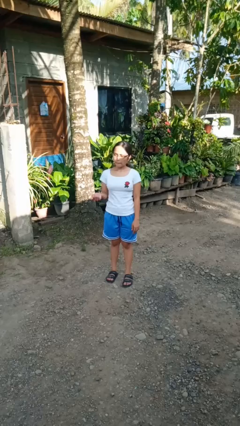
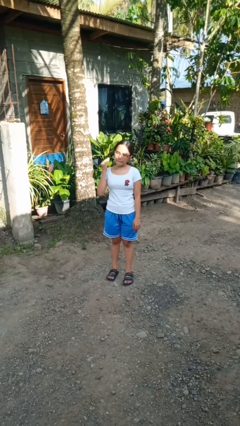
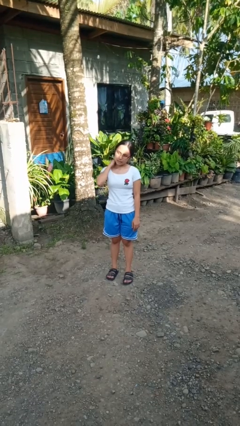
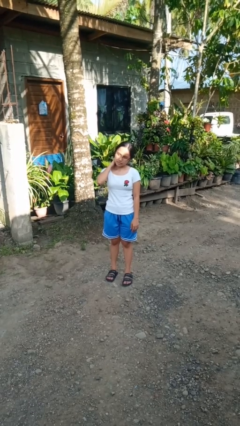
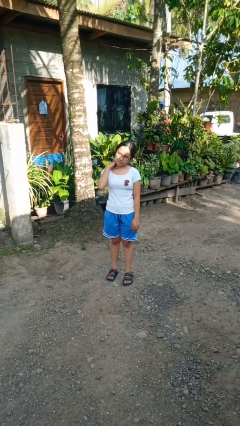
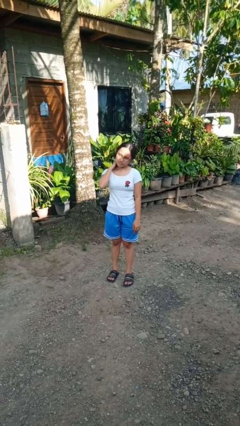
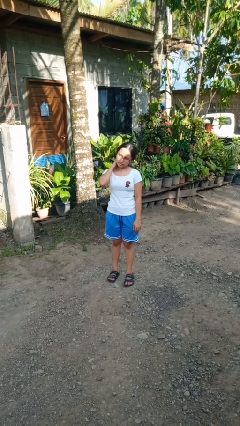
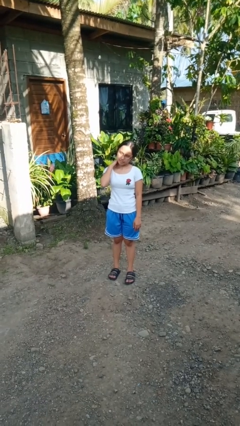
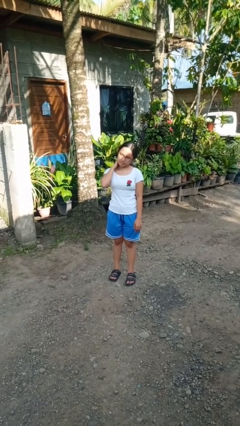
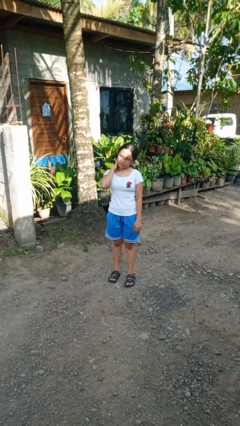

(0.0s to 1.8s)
person rubs neck

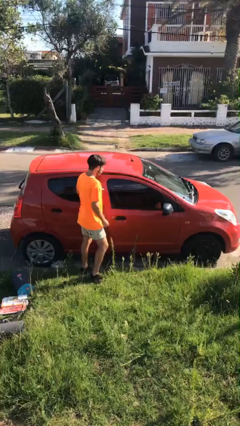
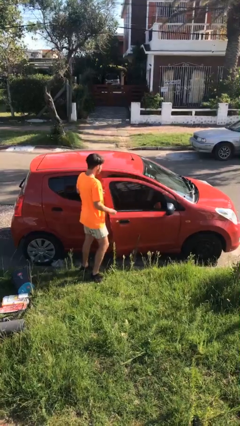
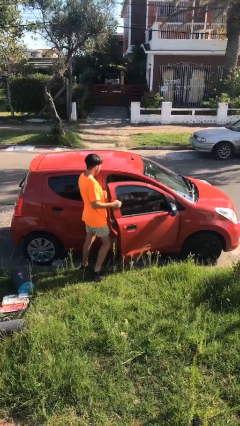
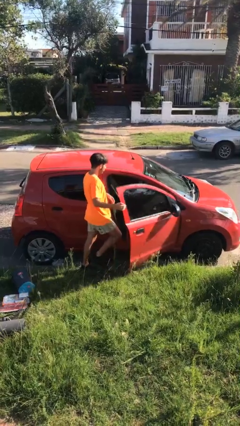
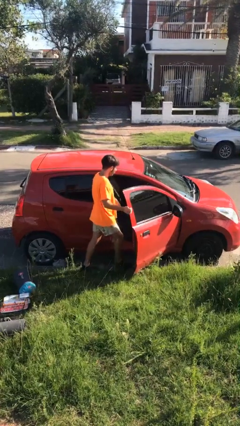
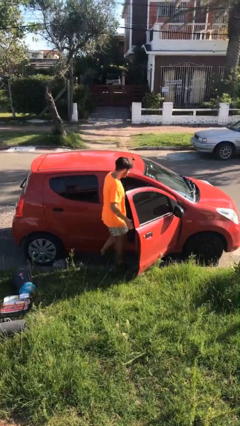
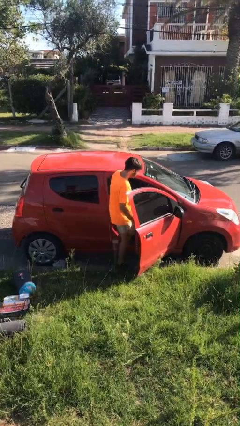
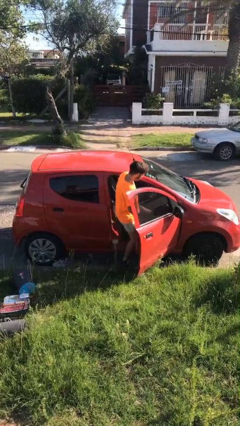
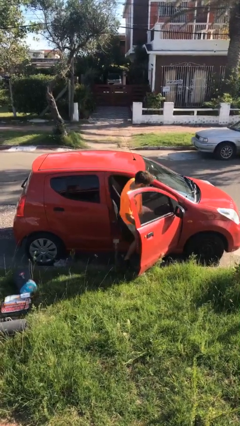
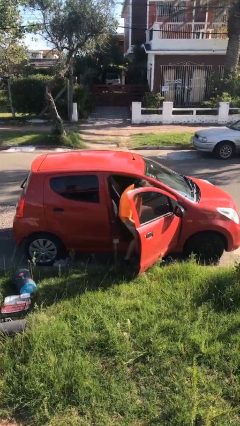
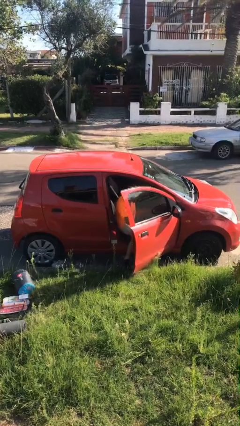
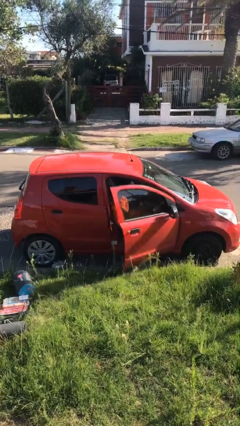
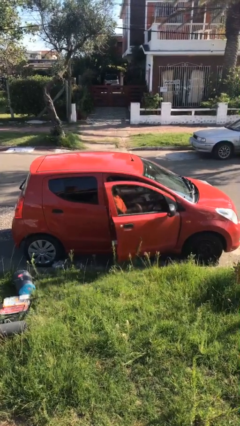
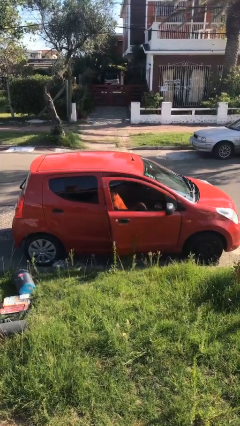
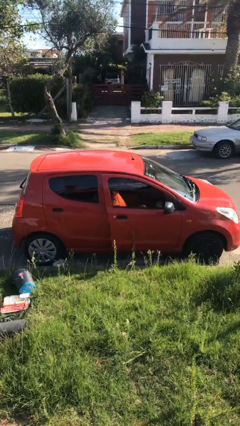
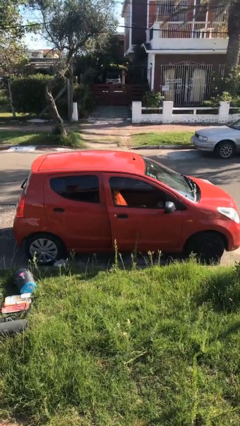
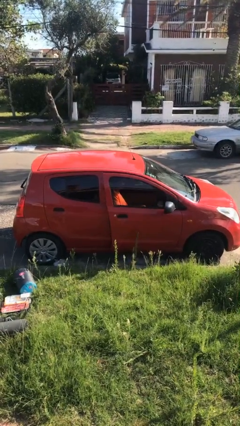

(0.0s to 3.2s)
car picks up person

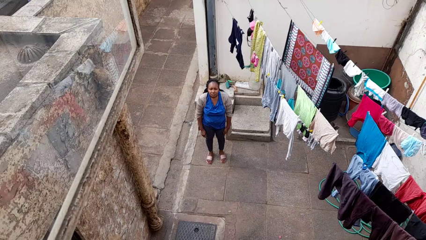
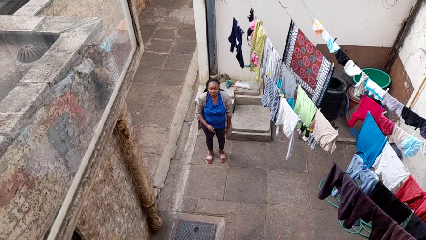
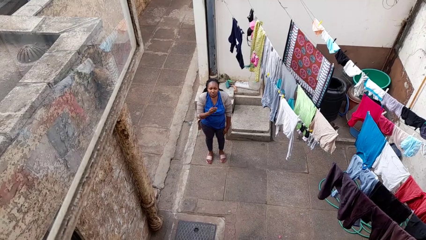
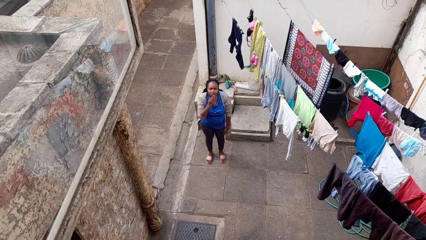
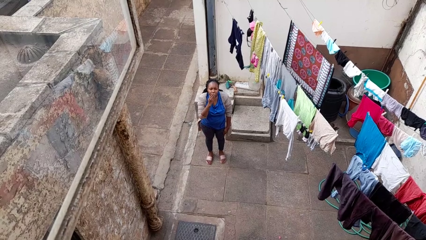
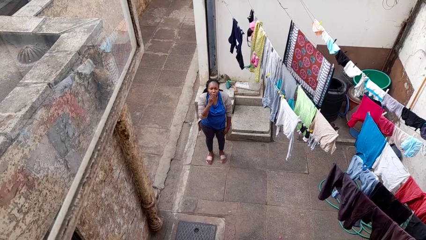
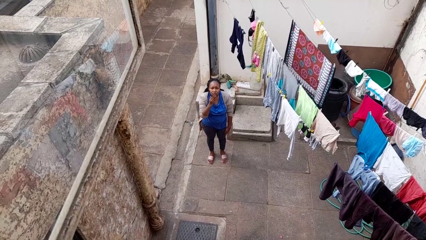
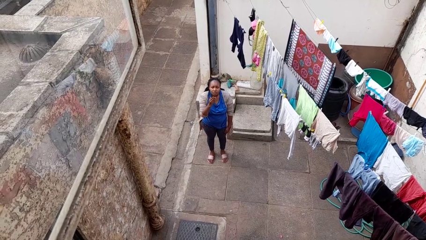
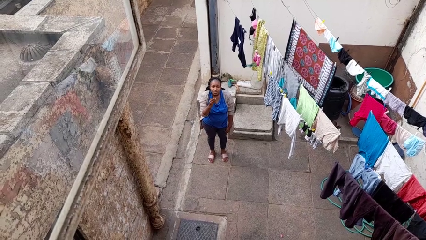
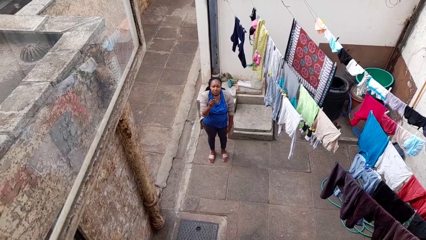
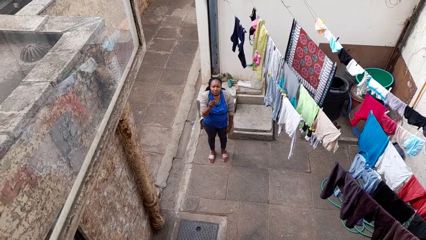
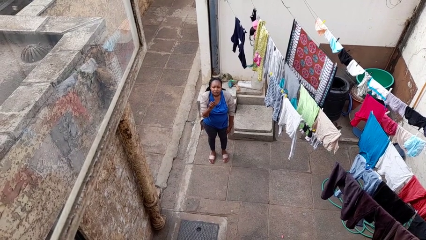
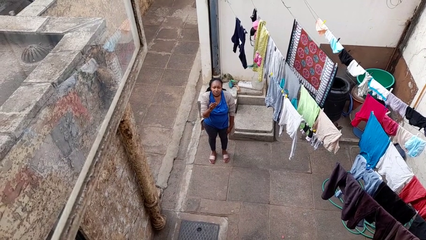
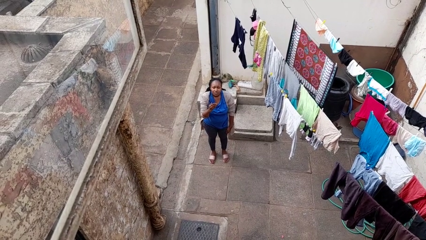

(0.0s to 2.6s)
person gestures blow kiss

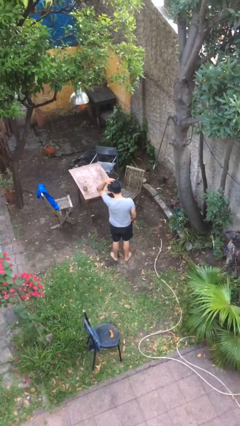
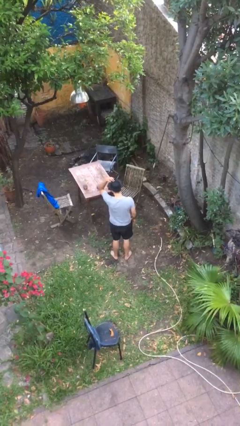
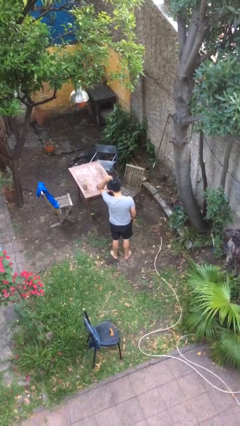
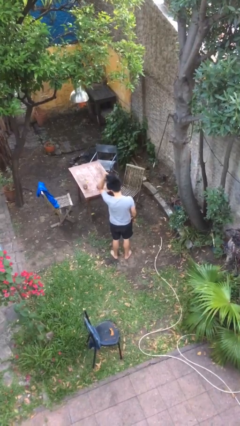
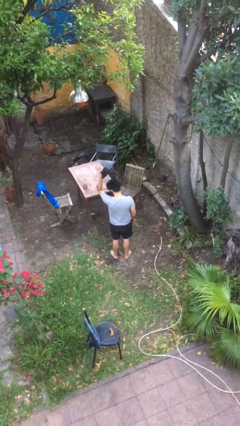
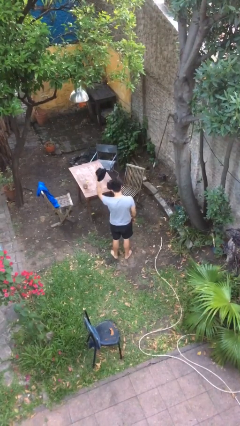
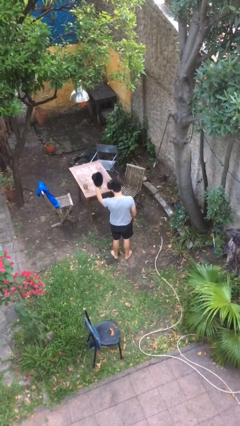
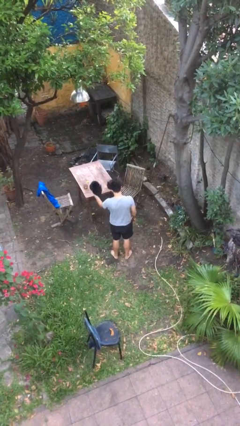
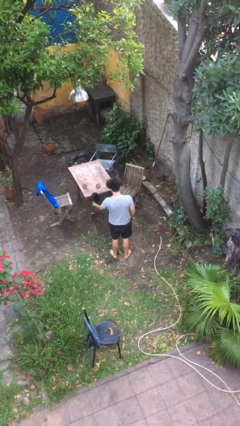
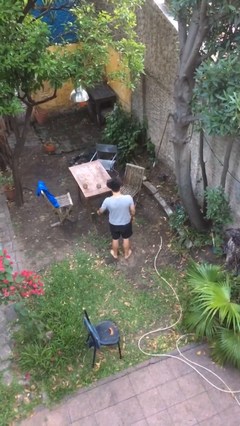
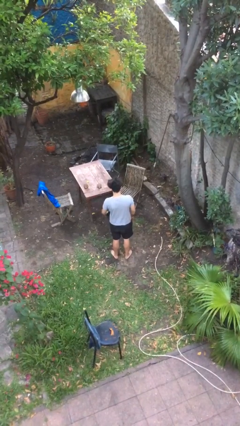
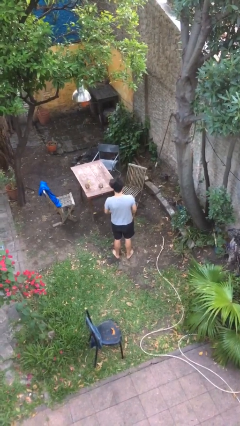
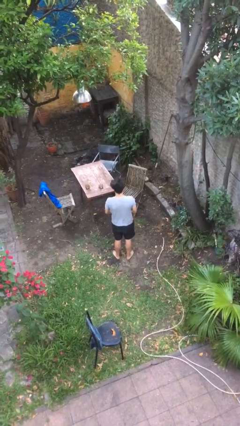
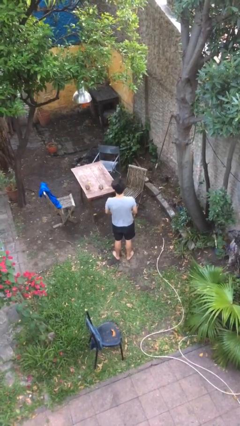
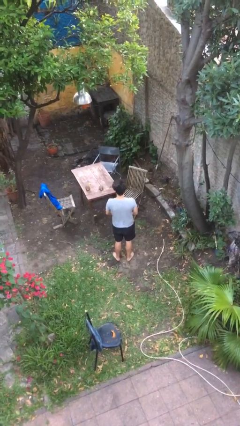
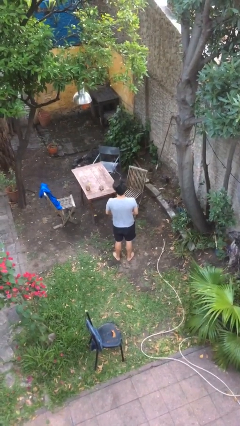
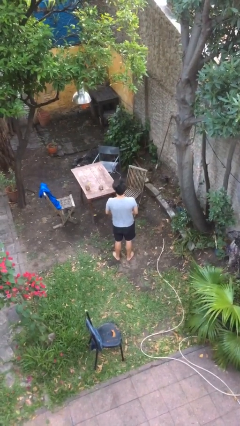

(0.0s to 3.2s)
person takes off hat

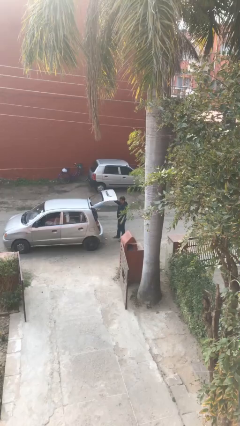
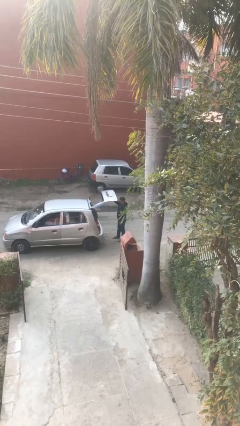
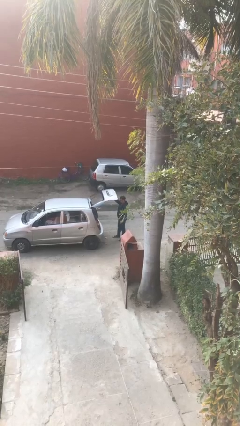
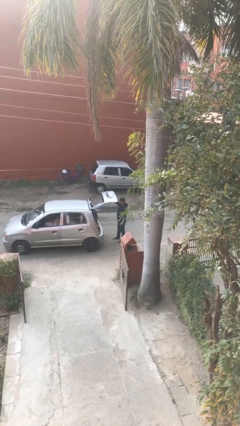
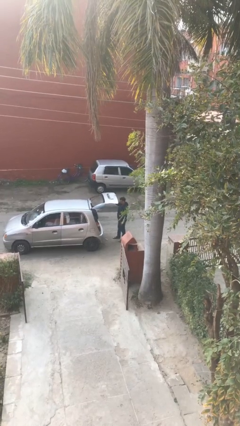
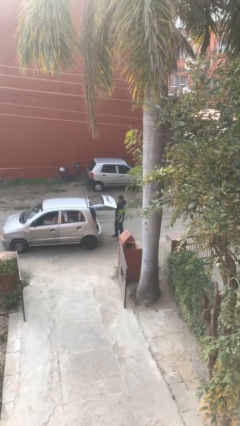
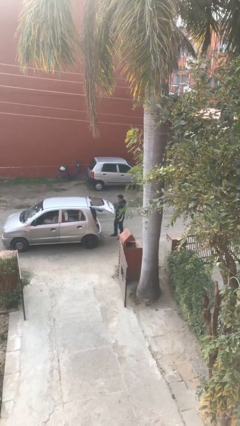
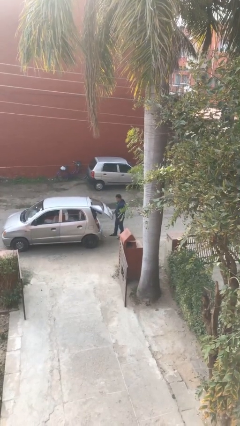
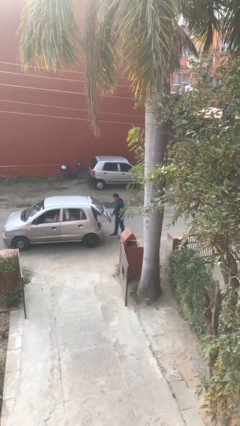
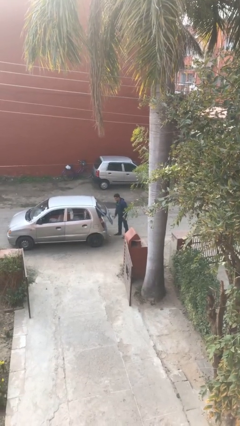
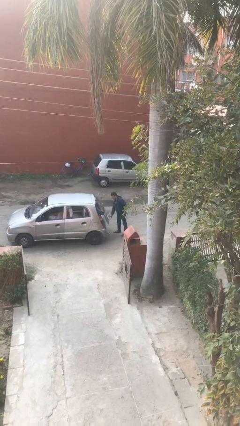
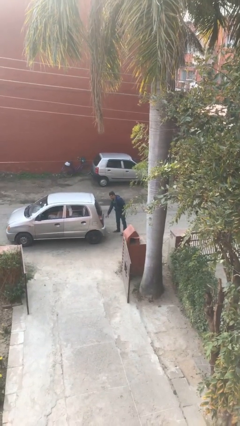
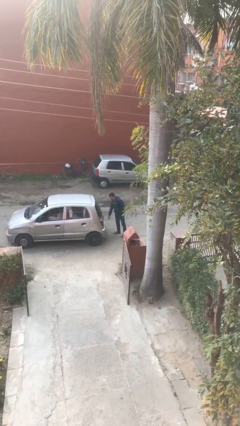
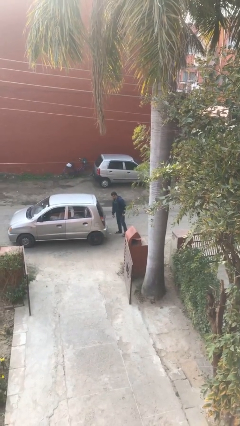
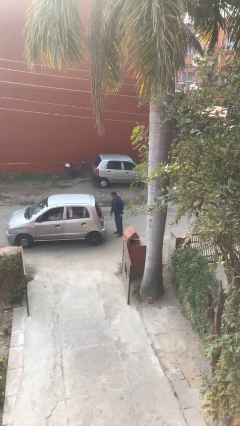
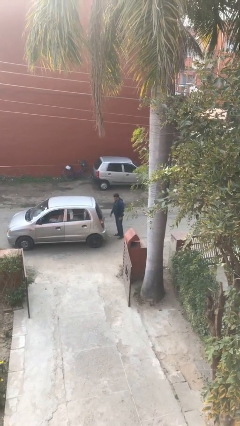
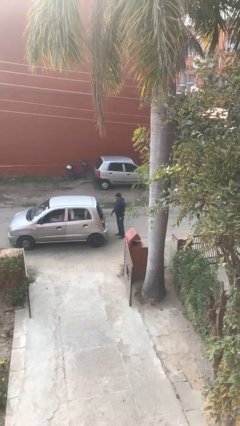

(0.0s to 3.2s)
person closes car trunk

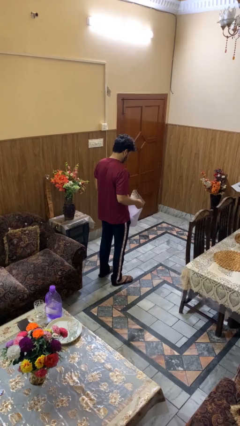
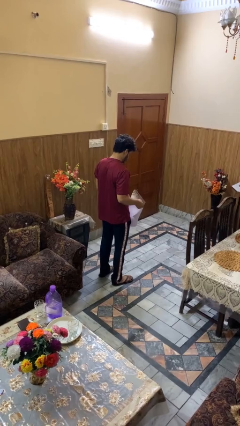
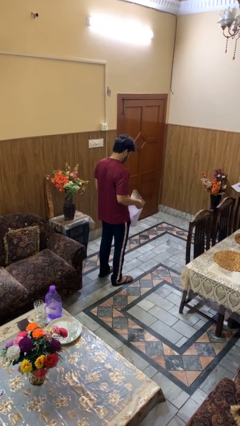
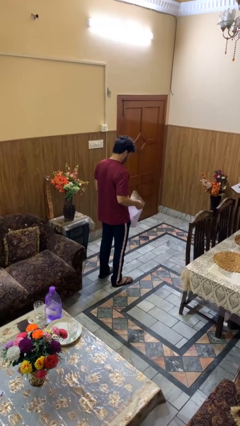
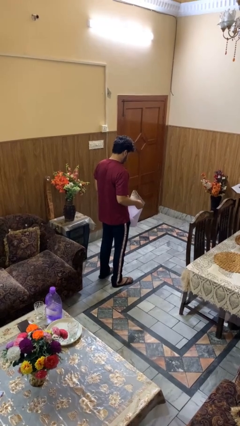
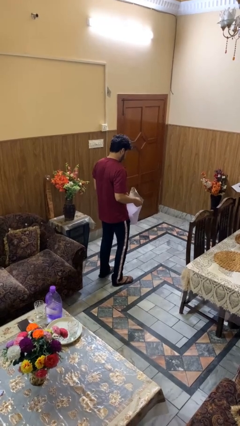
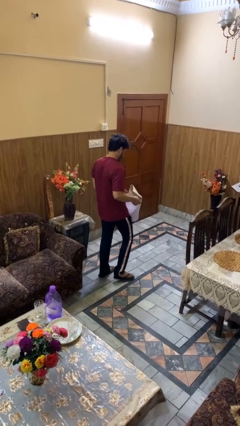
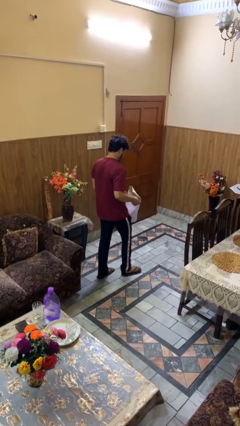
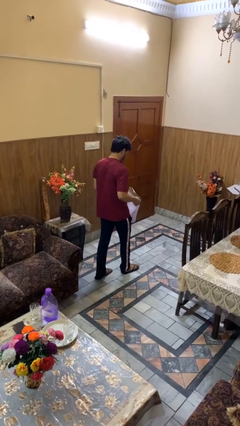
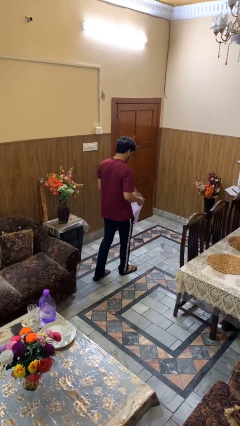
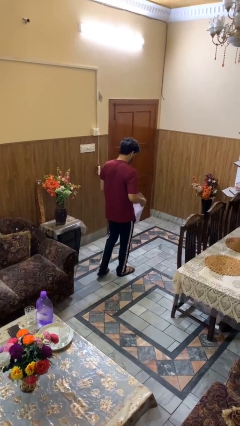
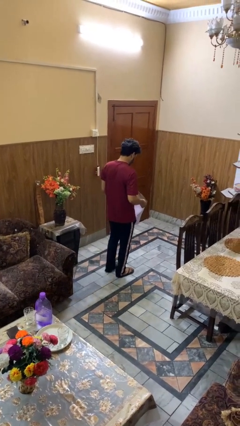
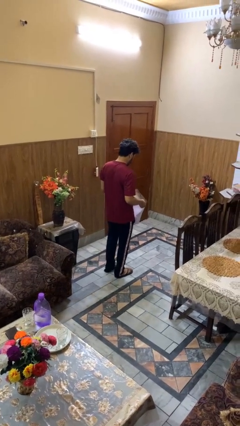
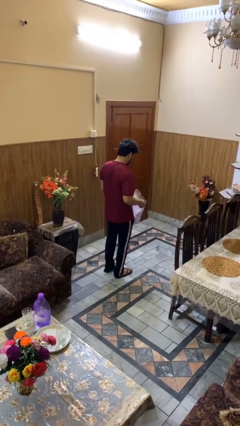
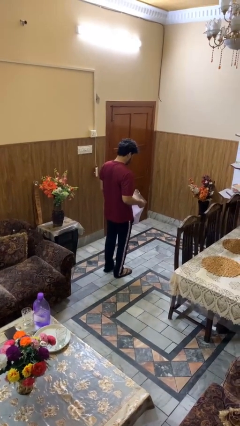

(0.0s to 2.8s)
person carries laundry basket

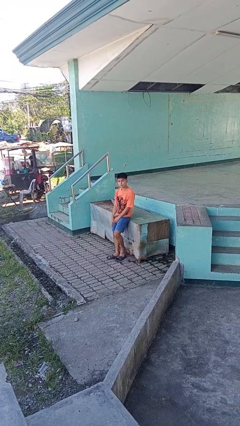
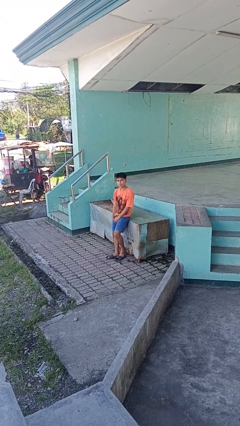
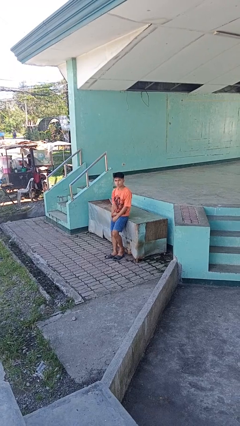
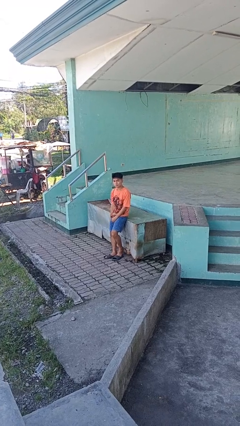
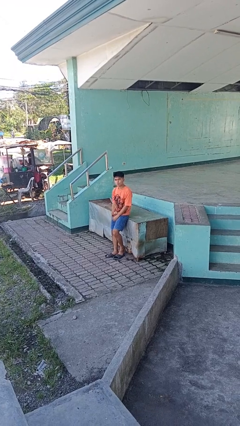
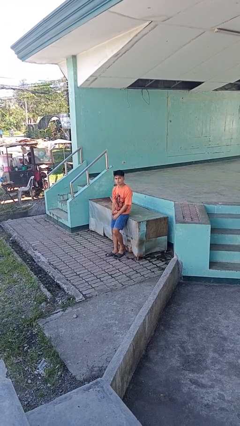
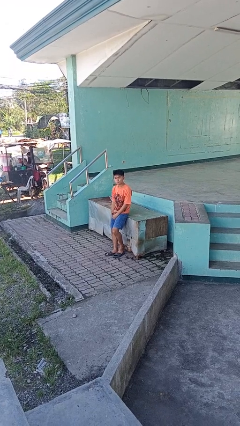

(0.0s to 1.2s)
person gestures lower hand
